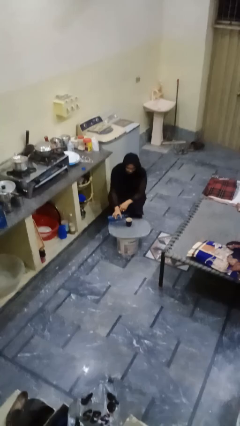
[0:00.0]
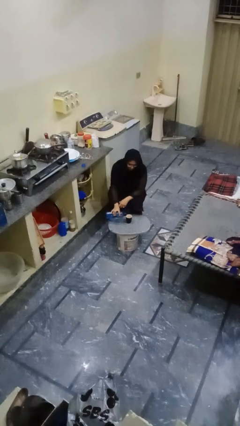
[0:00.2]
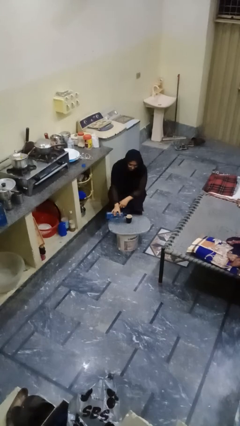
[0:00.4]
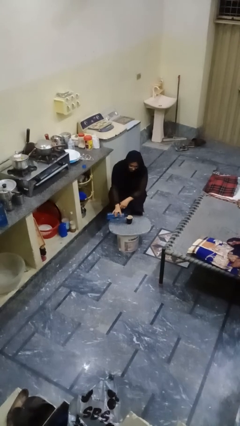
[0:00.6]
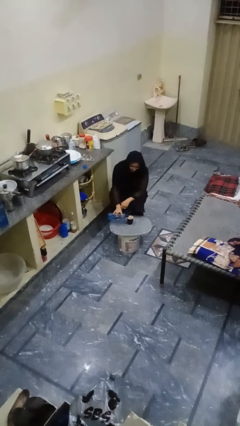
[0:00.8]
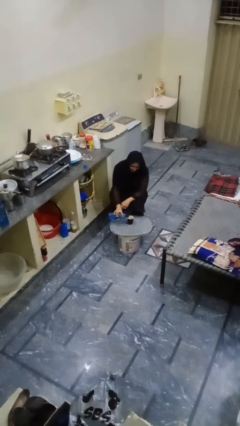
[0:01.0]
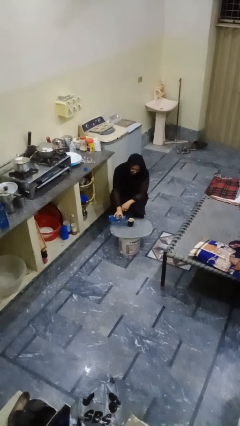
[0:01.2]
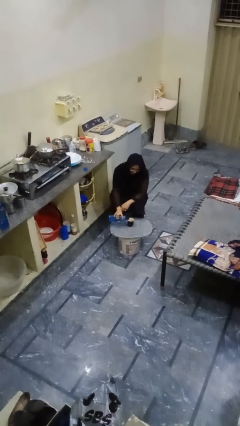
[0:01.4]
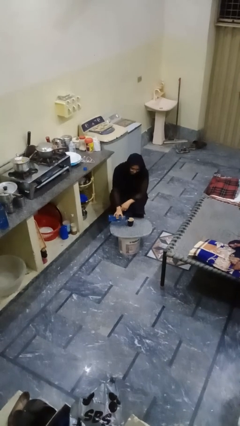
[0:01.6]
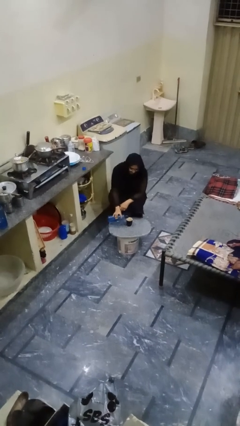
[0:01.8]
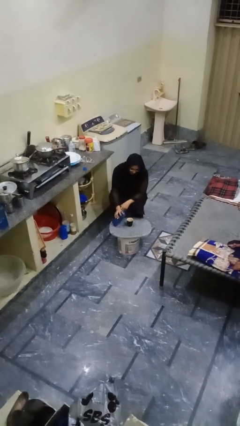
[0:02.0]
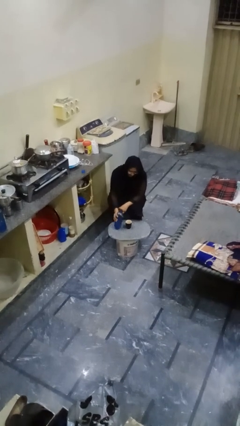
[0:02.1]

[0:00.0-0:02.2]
person pours liquid into cup

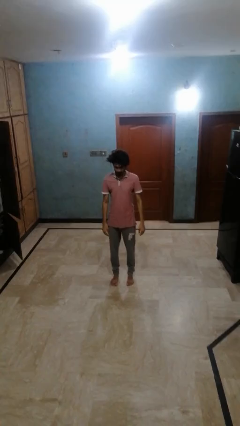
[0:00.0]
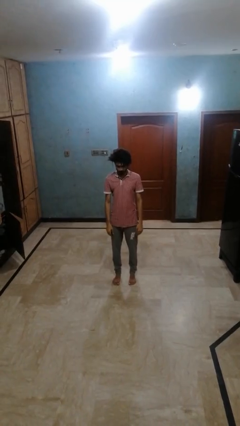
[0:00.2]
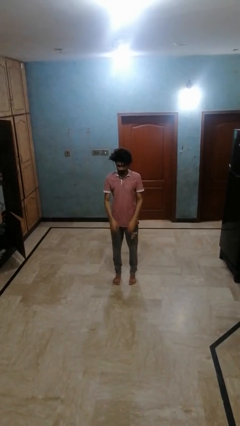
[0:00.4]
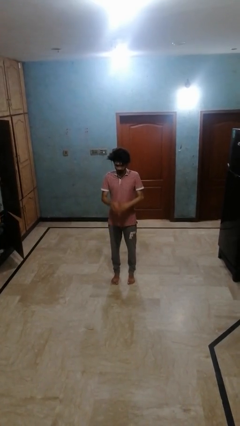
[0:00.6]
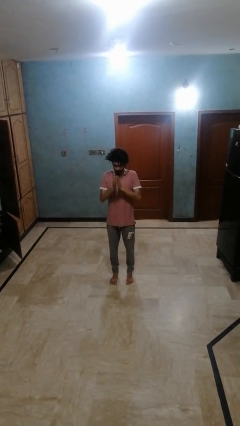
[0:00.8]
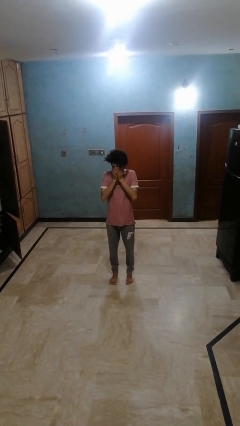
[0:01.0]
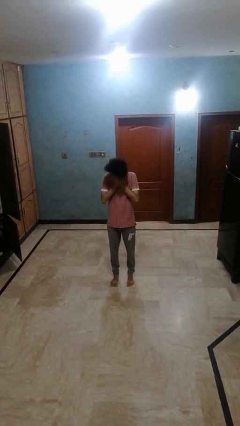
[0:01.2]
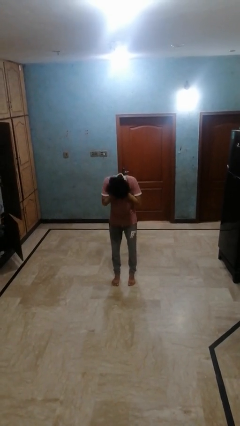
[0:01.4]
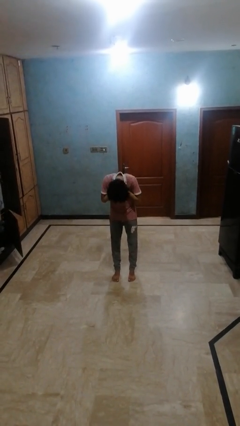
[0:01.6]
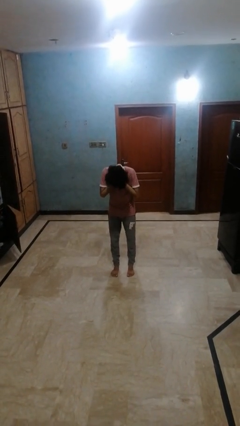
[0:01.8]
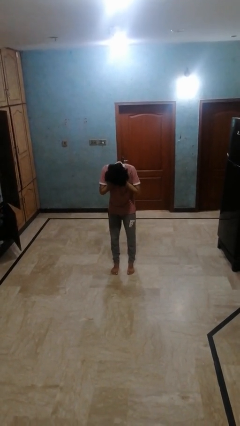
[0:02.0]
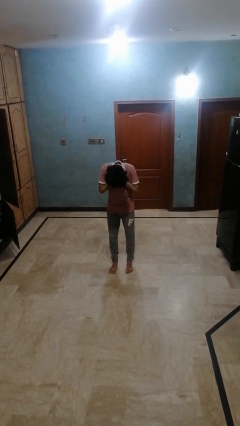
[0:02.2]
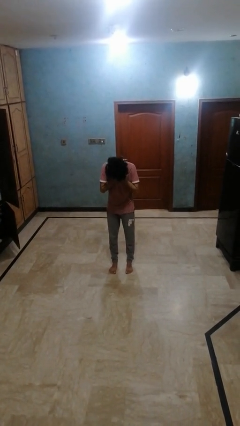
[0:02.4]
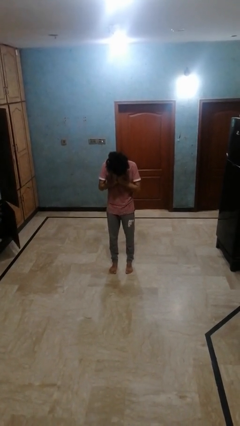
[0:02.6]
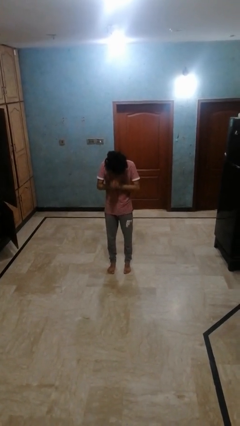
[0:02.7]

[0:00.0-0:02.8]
person sneezes into hand

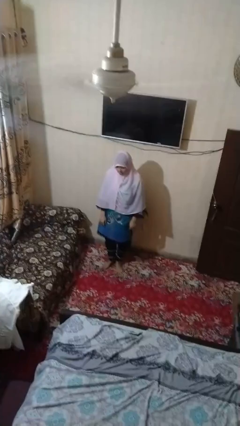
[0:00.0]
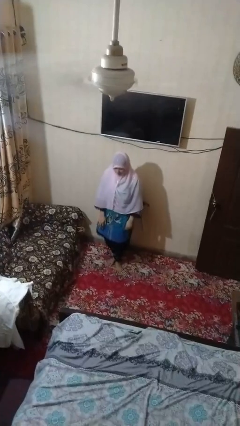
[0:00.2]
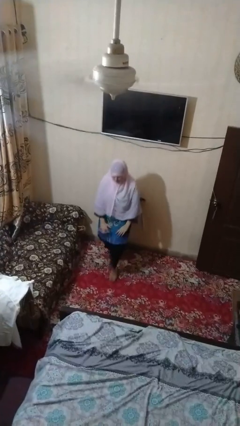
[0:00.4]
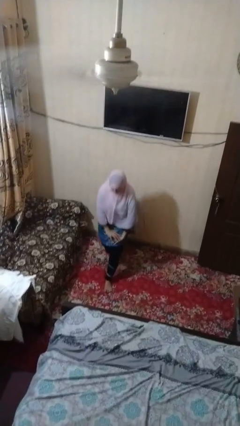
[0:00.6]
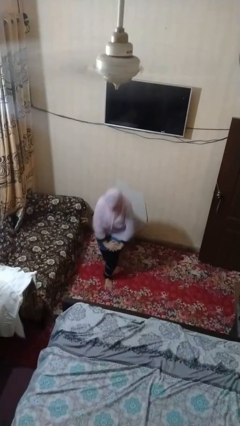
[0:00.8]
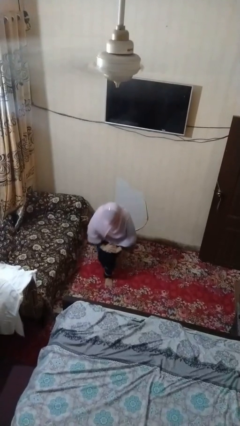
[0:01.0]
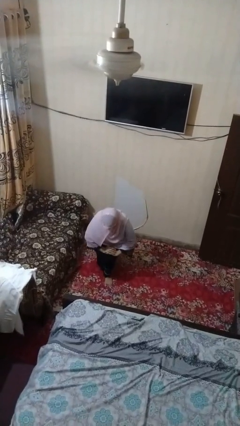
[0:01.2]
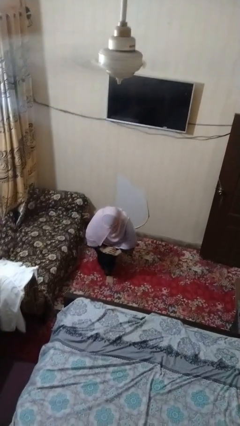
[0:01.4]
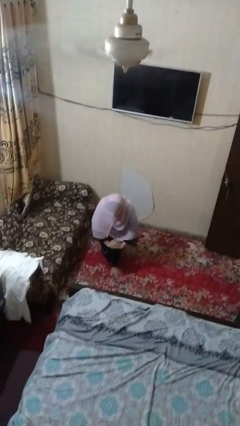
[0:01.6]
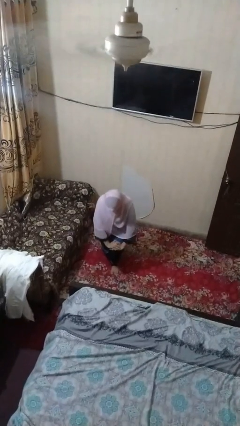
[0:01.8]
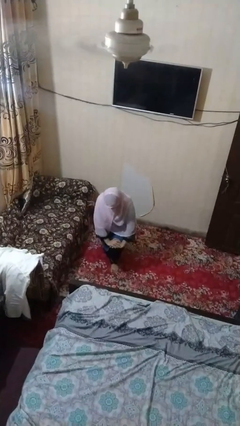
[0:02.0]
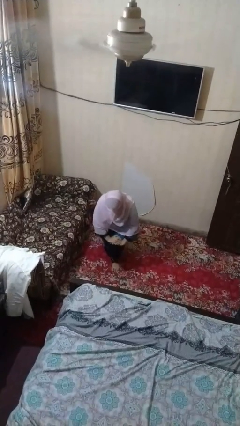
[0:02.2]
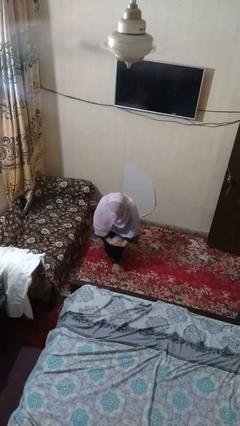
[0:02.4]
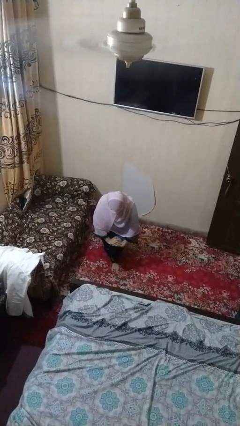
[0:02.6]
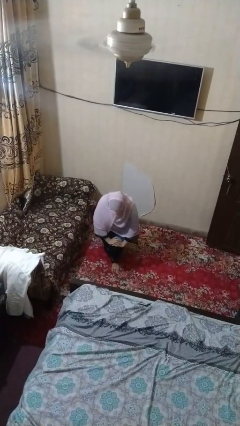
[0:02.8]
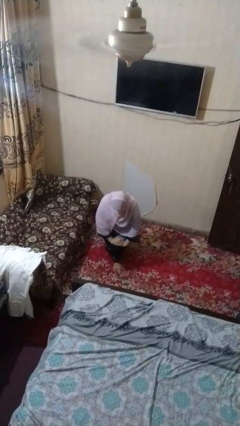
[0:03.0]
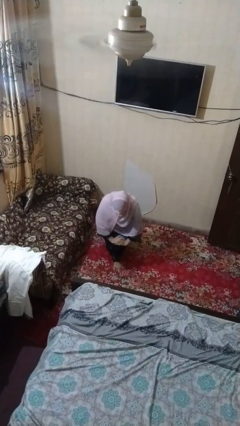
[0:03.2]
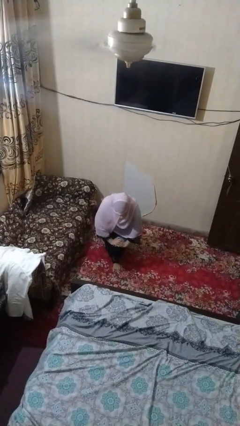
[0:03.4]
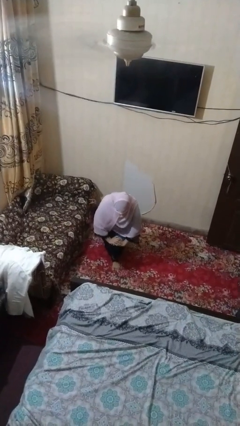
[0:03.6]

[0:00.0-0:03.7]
person exercises with lunges

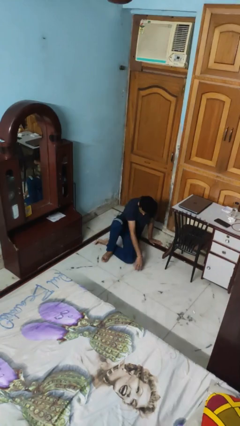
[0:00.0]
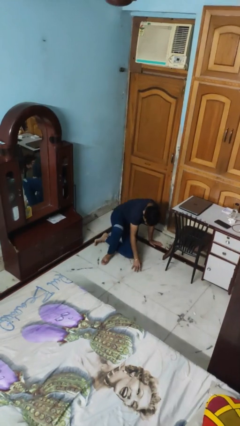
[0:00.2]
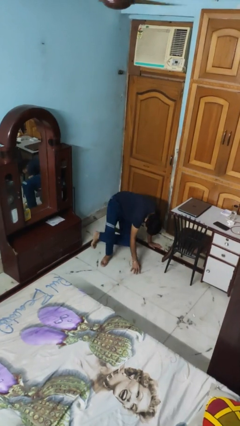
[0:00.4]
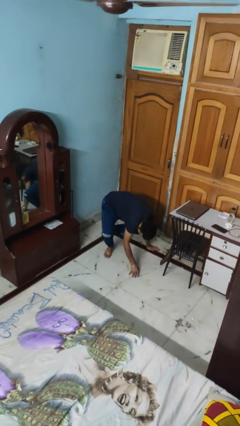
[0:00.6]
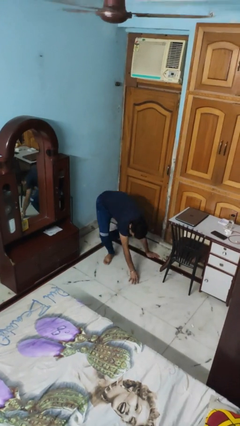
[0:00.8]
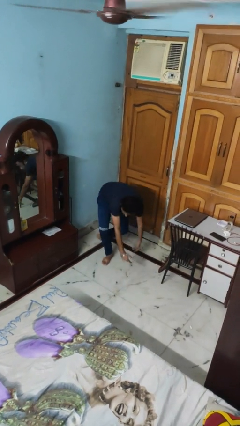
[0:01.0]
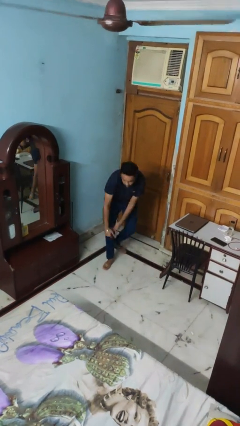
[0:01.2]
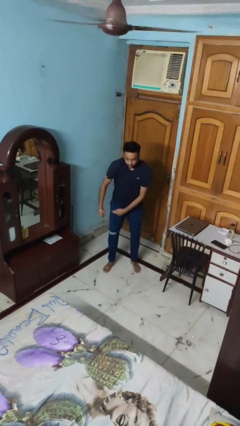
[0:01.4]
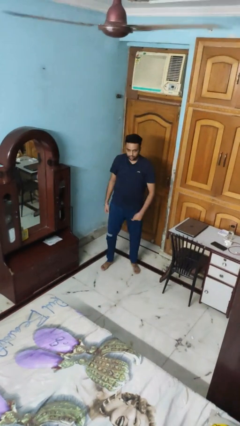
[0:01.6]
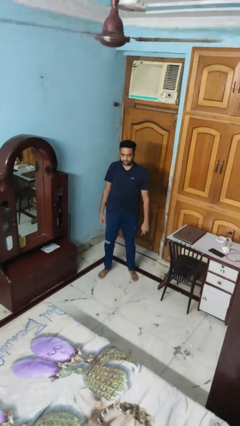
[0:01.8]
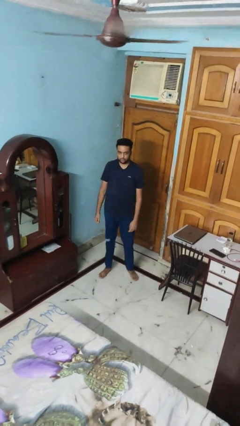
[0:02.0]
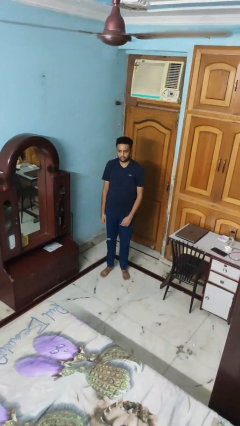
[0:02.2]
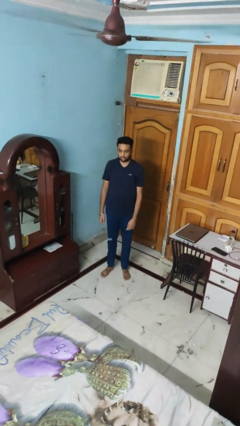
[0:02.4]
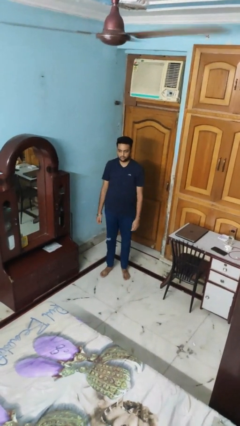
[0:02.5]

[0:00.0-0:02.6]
person stands up from floor

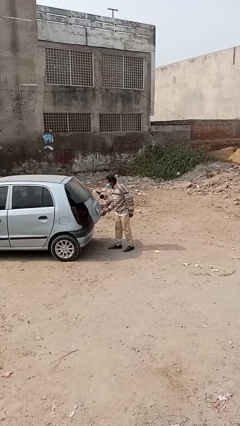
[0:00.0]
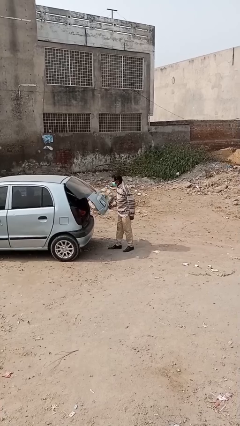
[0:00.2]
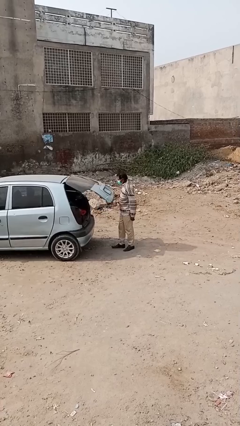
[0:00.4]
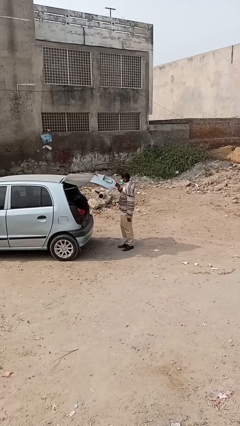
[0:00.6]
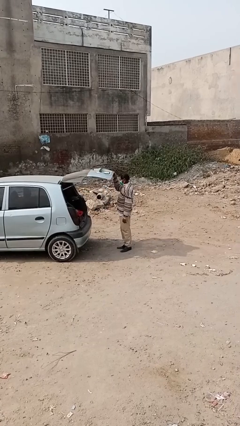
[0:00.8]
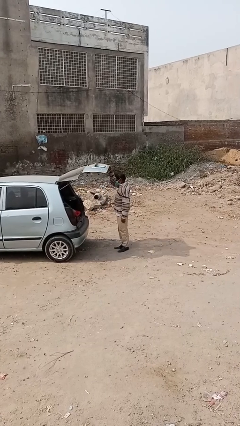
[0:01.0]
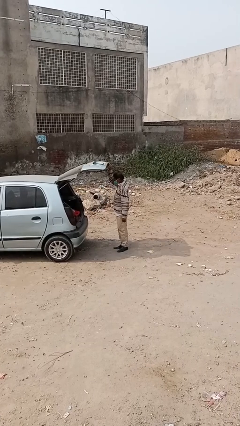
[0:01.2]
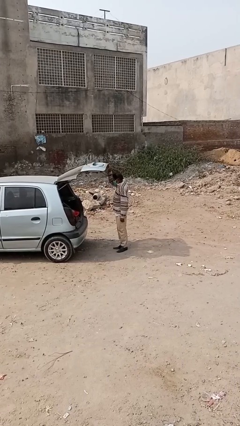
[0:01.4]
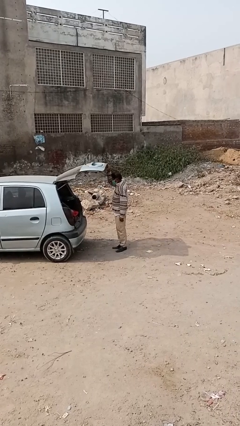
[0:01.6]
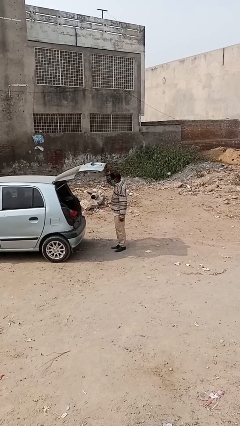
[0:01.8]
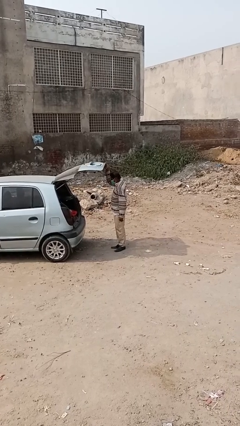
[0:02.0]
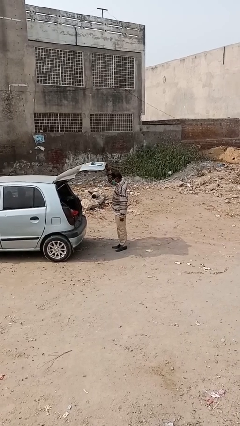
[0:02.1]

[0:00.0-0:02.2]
person opens car trunk

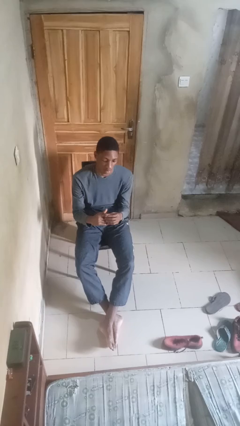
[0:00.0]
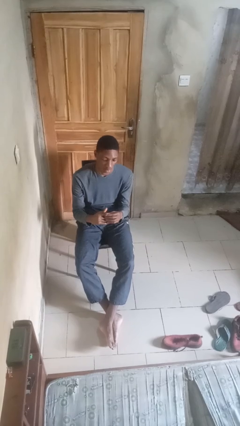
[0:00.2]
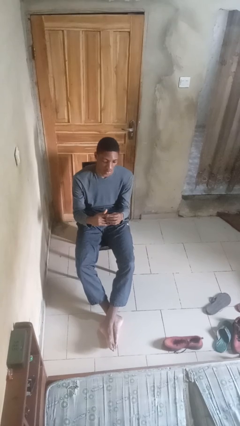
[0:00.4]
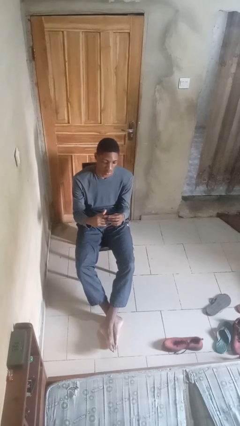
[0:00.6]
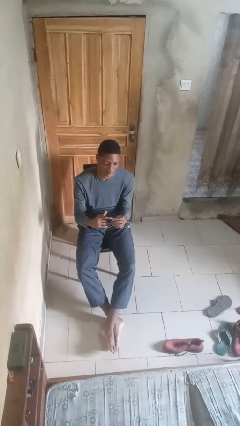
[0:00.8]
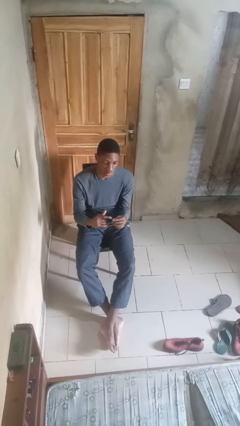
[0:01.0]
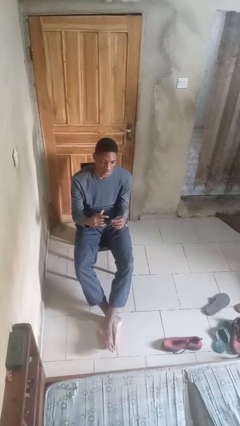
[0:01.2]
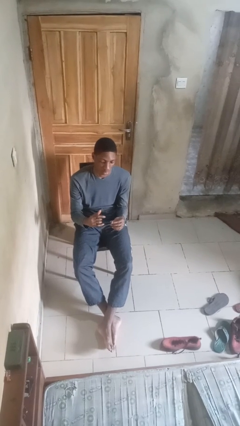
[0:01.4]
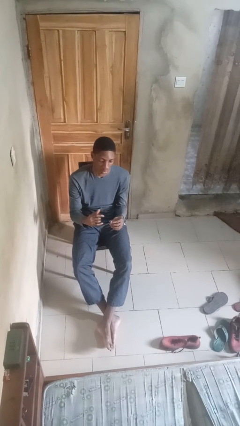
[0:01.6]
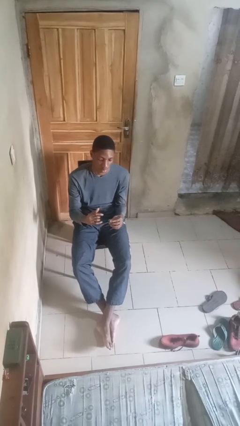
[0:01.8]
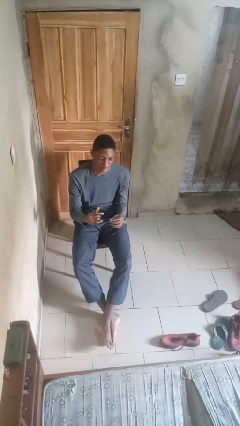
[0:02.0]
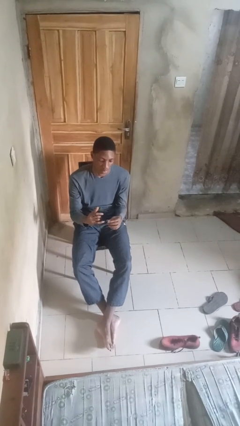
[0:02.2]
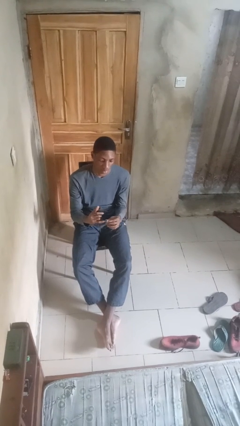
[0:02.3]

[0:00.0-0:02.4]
person takes off ring

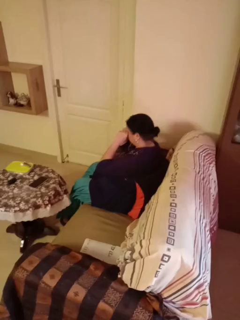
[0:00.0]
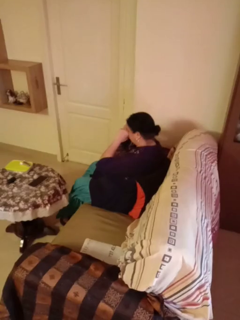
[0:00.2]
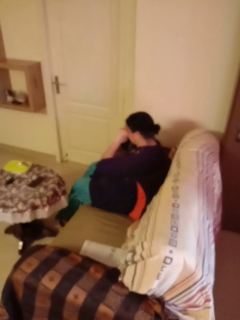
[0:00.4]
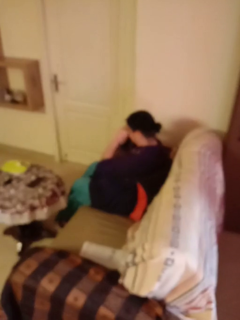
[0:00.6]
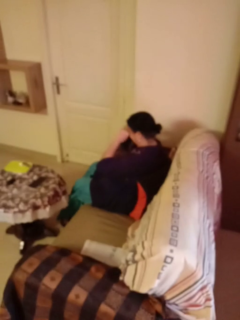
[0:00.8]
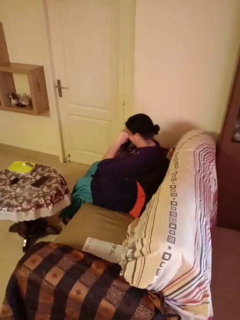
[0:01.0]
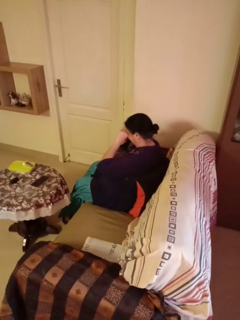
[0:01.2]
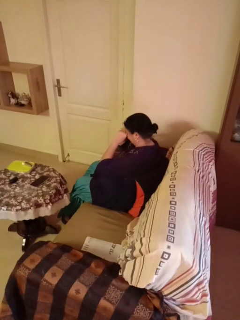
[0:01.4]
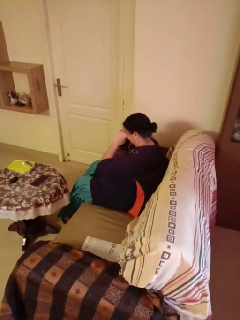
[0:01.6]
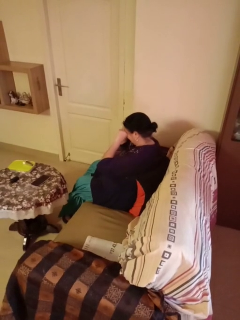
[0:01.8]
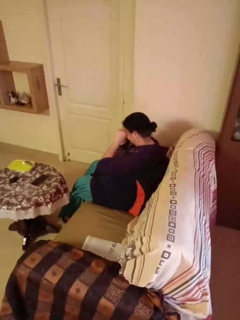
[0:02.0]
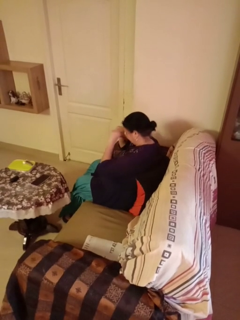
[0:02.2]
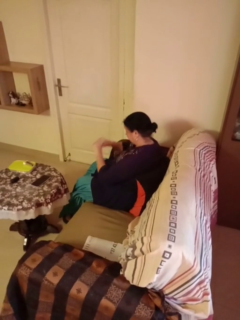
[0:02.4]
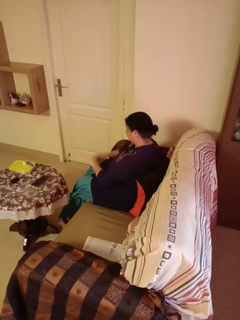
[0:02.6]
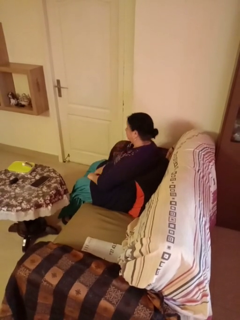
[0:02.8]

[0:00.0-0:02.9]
person rubs eyes
